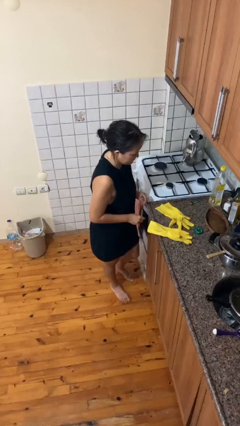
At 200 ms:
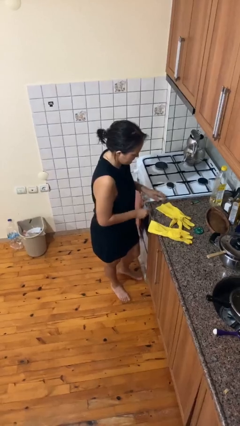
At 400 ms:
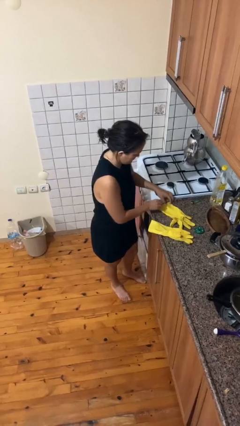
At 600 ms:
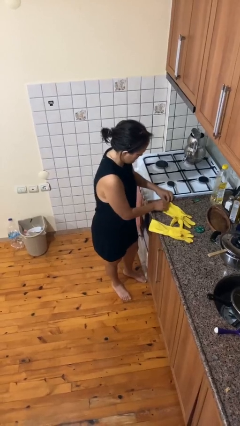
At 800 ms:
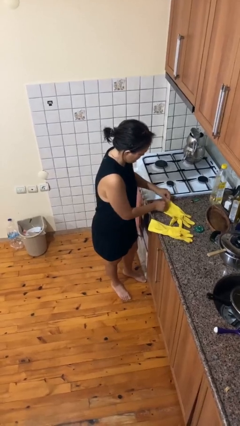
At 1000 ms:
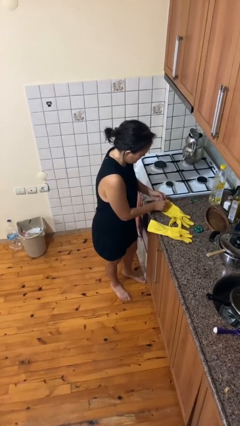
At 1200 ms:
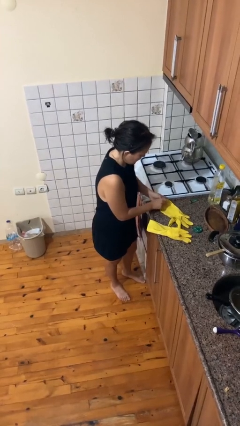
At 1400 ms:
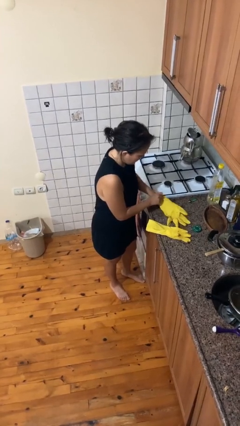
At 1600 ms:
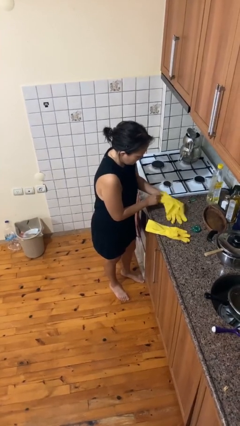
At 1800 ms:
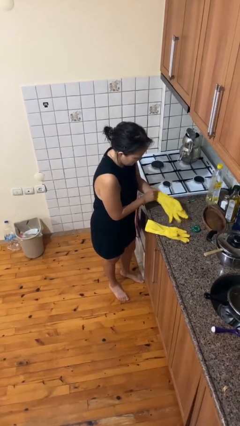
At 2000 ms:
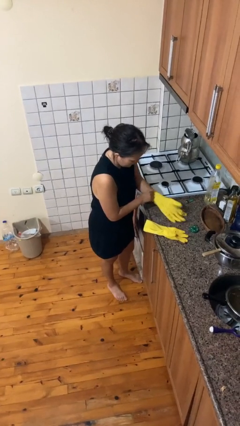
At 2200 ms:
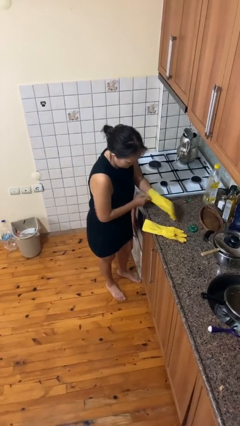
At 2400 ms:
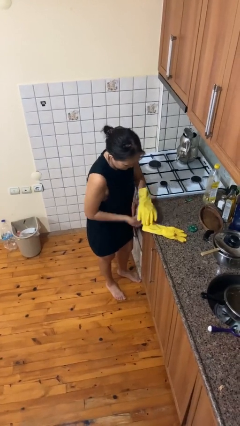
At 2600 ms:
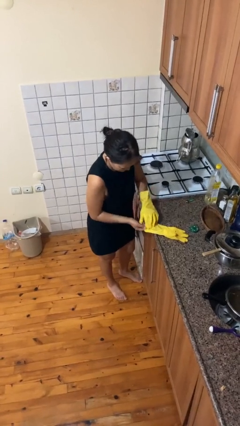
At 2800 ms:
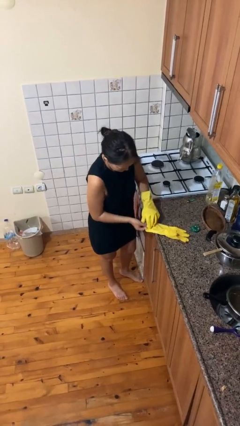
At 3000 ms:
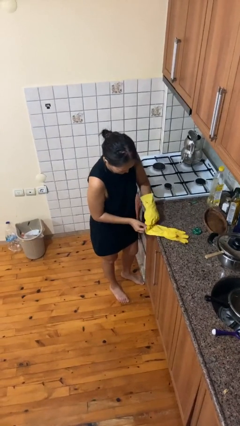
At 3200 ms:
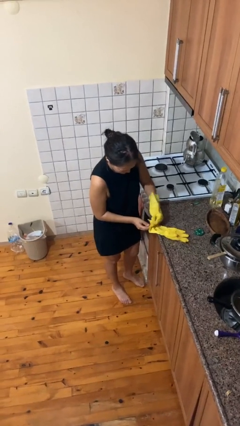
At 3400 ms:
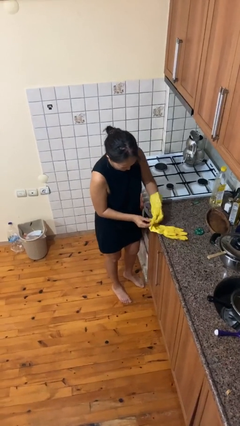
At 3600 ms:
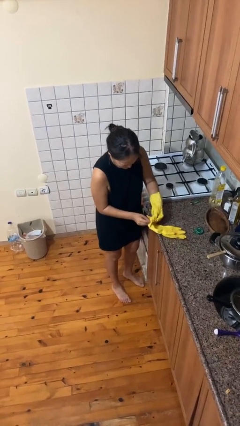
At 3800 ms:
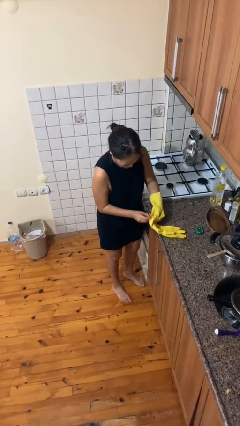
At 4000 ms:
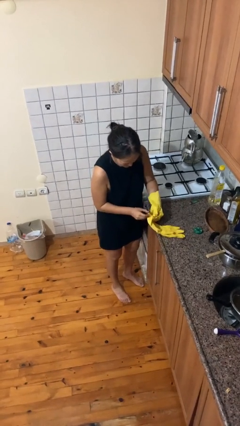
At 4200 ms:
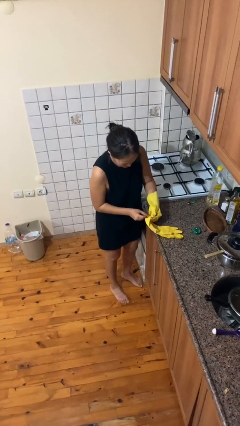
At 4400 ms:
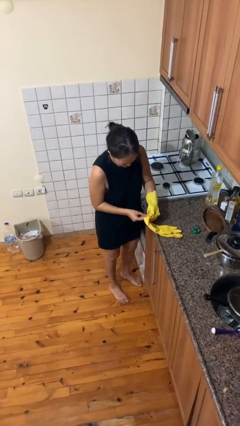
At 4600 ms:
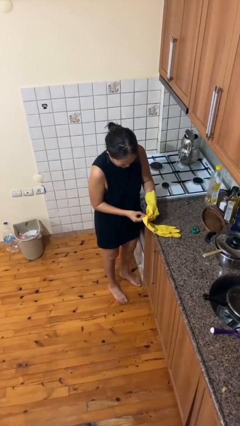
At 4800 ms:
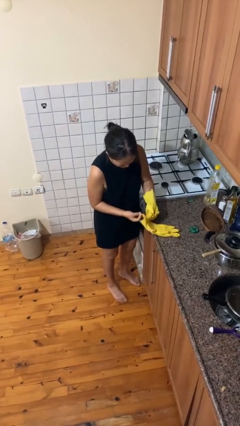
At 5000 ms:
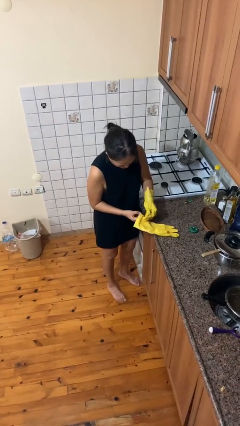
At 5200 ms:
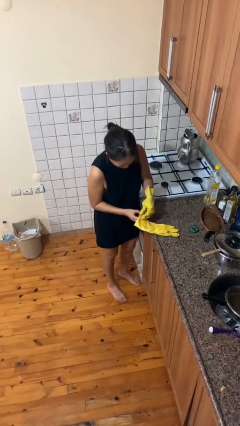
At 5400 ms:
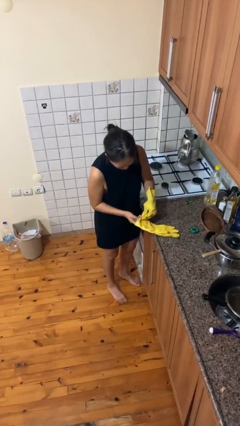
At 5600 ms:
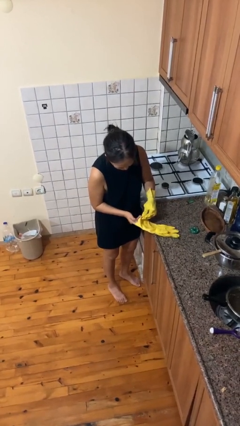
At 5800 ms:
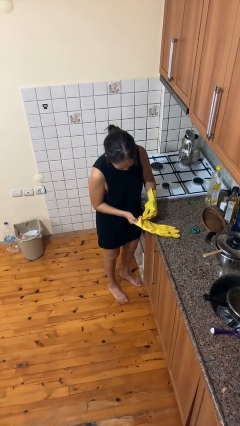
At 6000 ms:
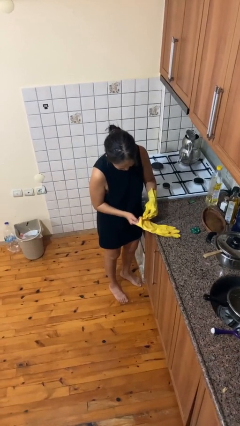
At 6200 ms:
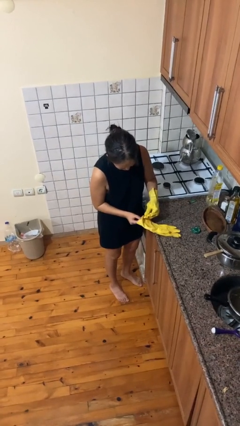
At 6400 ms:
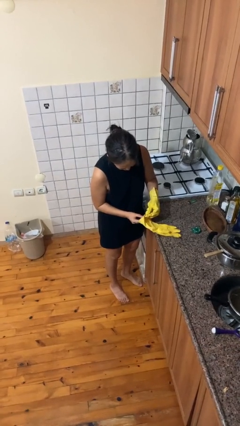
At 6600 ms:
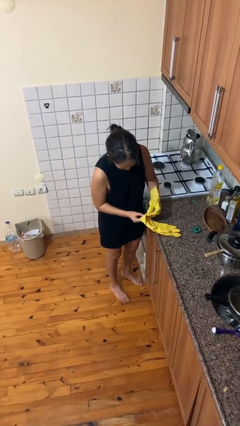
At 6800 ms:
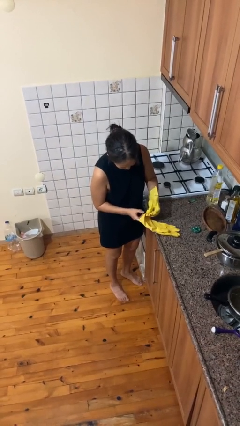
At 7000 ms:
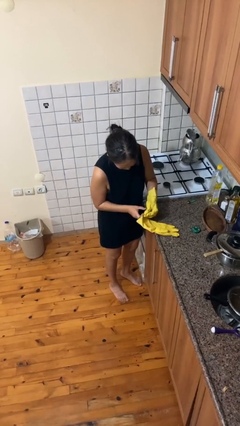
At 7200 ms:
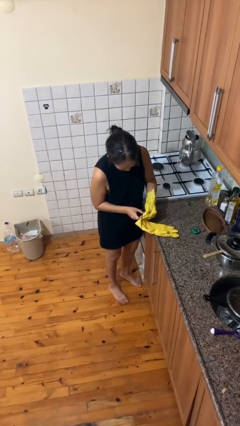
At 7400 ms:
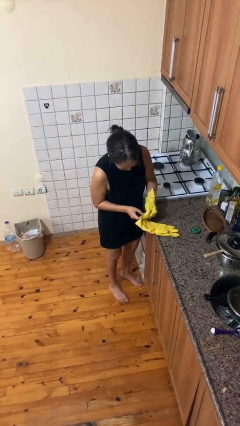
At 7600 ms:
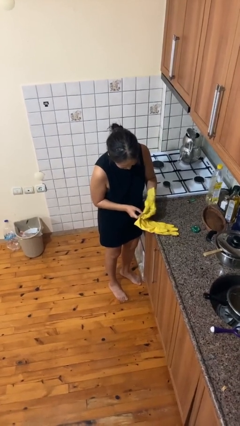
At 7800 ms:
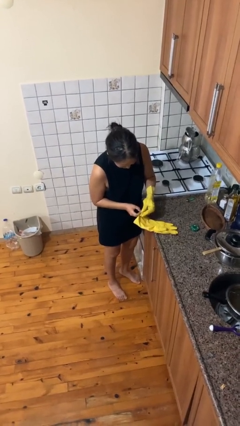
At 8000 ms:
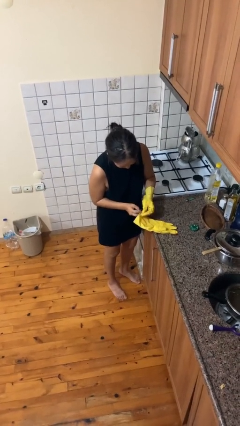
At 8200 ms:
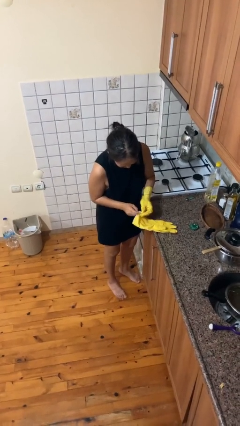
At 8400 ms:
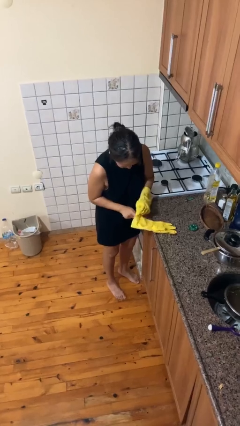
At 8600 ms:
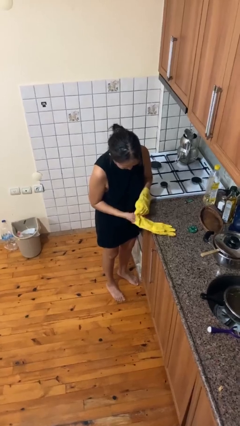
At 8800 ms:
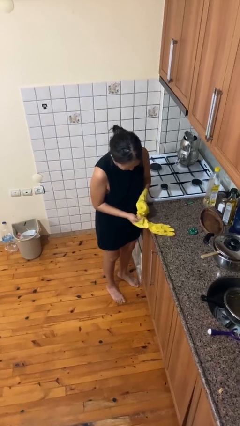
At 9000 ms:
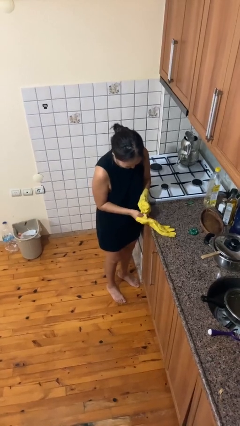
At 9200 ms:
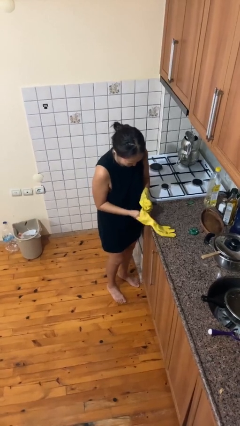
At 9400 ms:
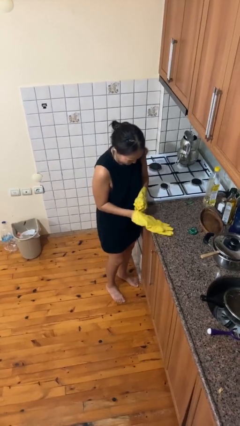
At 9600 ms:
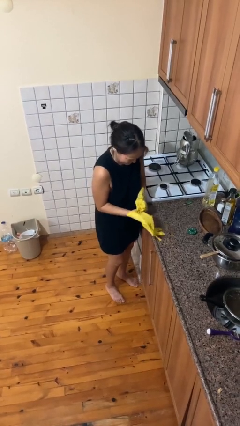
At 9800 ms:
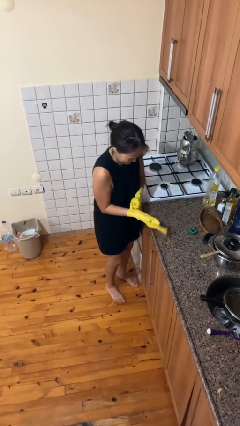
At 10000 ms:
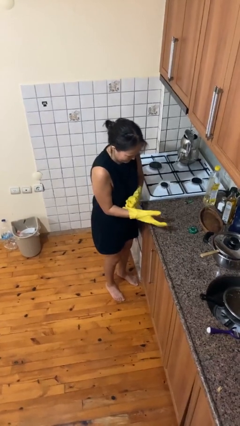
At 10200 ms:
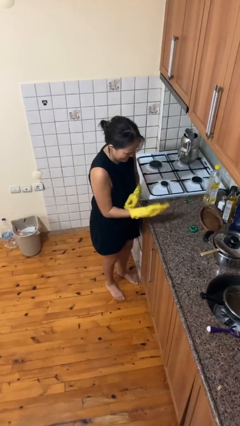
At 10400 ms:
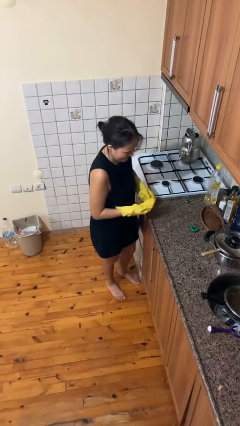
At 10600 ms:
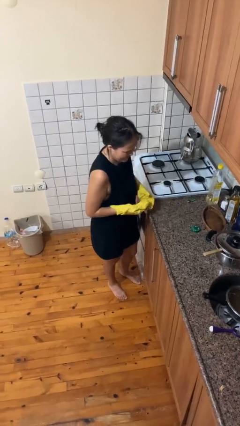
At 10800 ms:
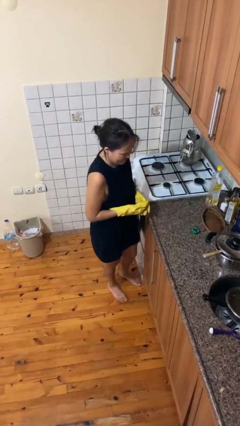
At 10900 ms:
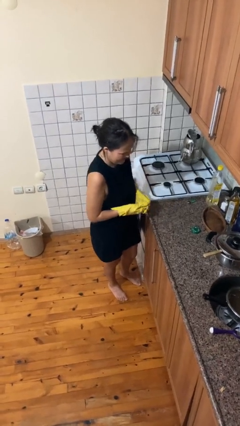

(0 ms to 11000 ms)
person puts on gloves

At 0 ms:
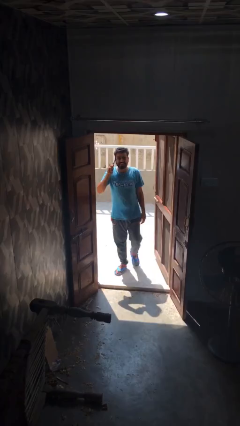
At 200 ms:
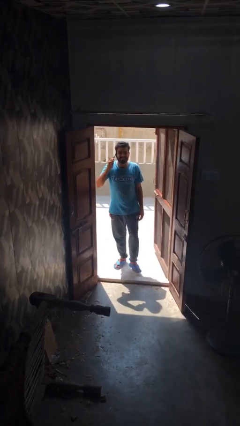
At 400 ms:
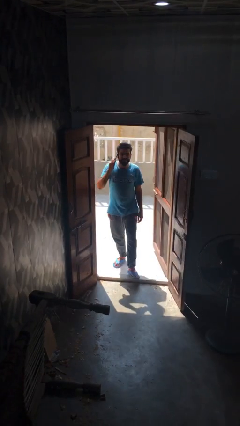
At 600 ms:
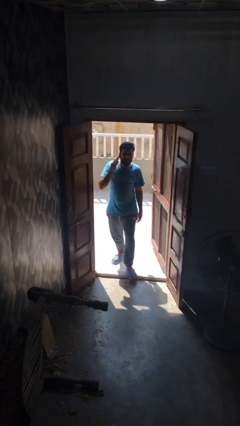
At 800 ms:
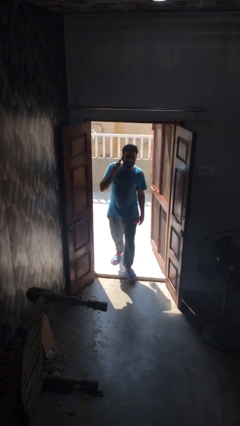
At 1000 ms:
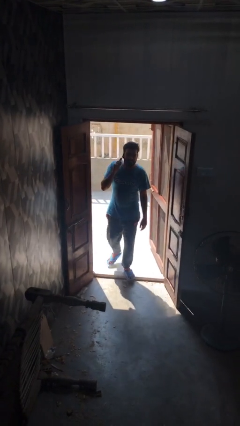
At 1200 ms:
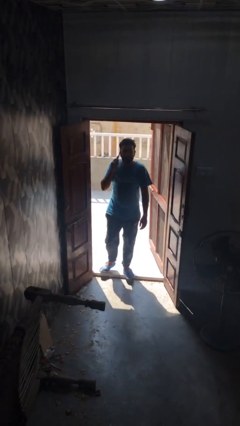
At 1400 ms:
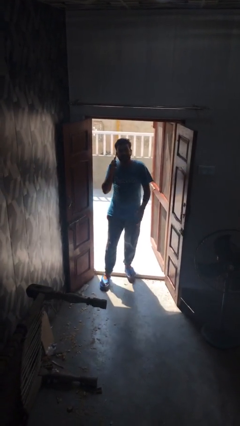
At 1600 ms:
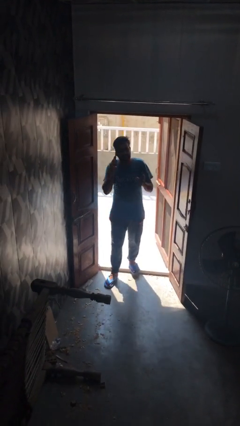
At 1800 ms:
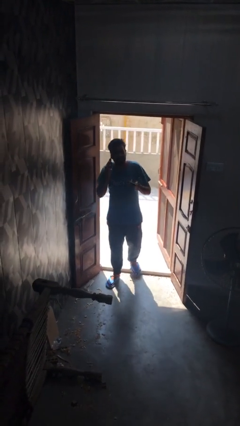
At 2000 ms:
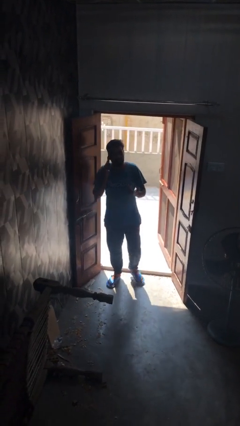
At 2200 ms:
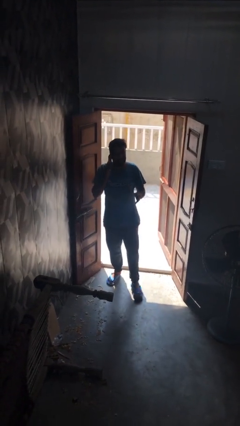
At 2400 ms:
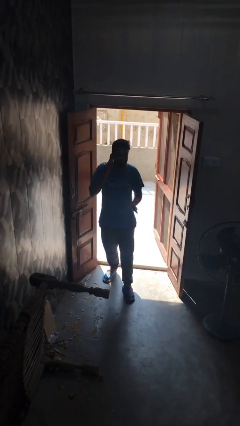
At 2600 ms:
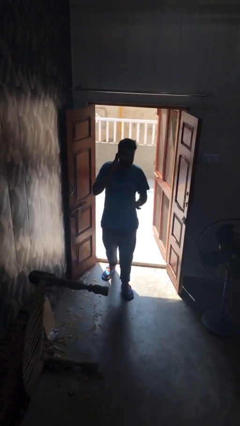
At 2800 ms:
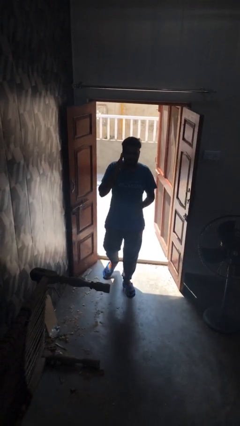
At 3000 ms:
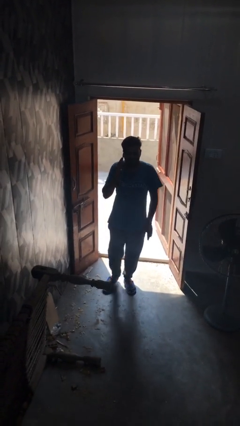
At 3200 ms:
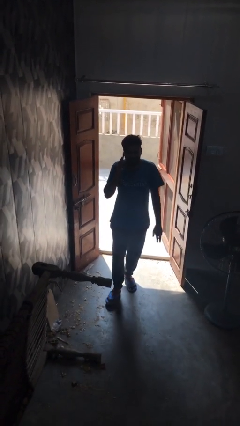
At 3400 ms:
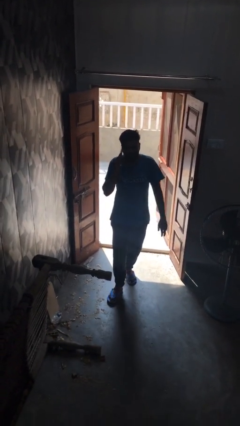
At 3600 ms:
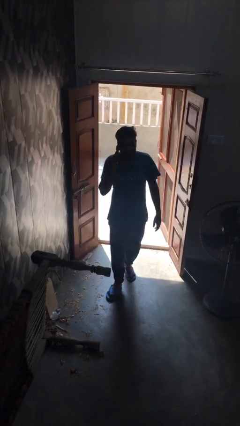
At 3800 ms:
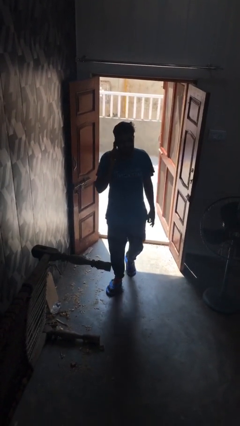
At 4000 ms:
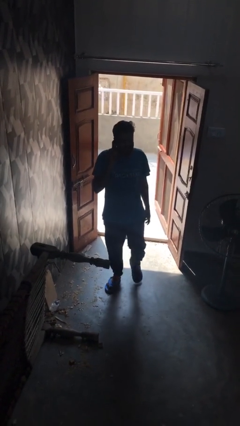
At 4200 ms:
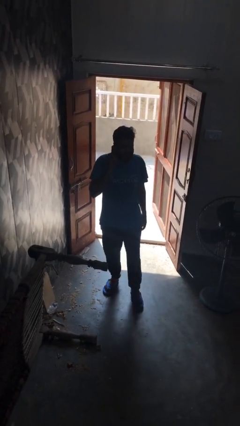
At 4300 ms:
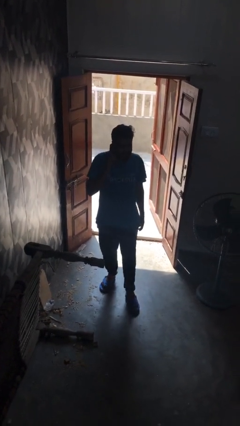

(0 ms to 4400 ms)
person enters scene through structure

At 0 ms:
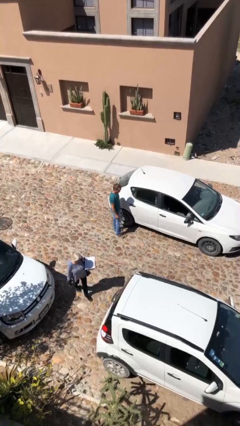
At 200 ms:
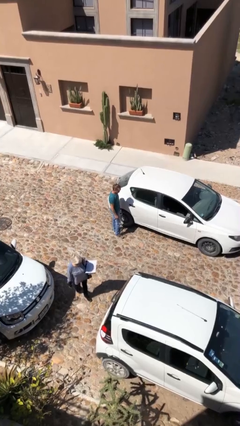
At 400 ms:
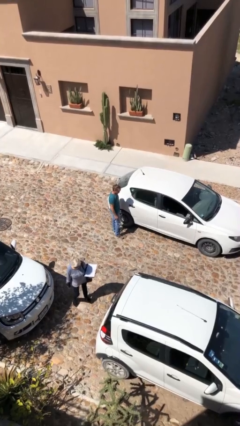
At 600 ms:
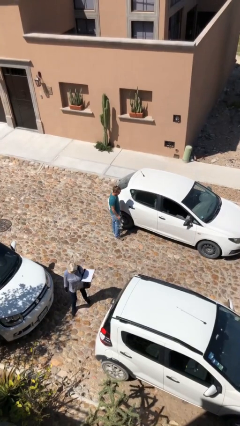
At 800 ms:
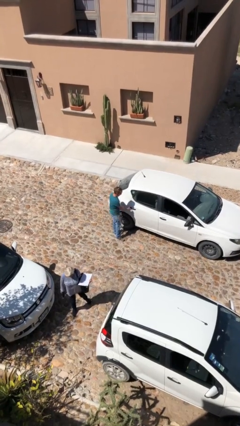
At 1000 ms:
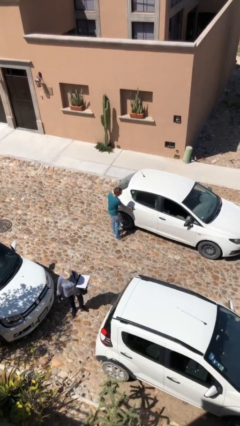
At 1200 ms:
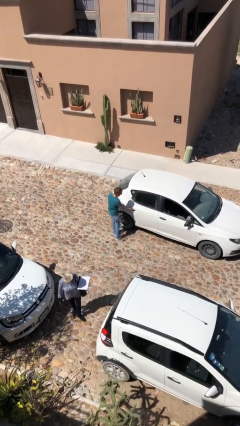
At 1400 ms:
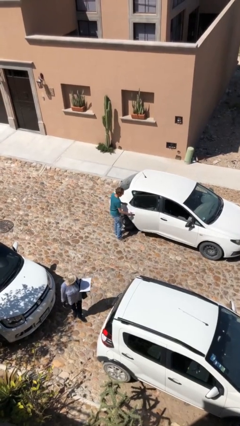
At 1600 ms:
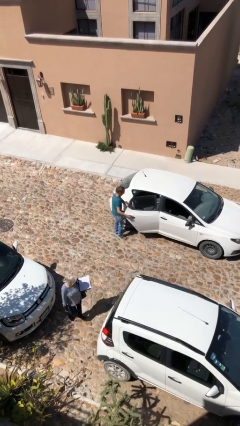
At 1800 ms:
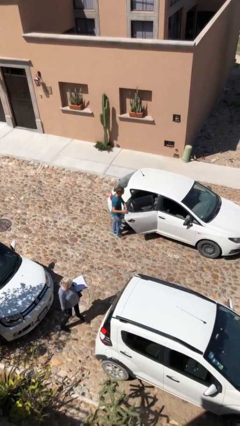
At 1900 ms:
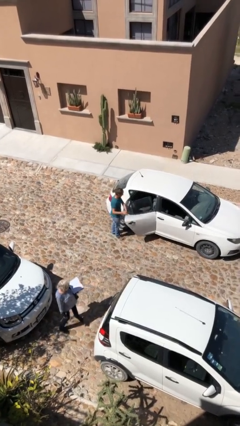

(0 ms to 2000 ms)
person opens car door

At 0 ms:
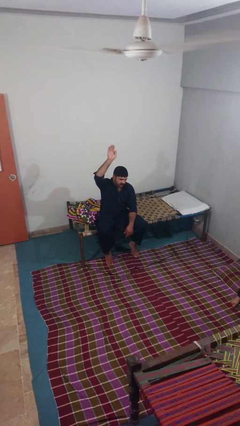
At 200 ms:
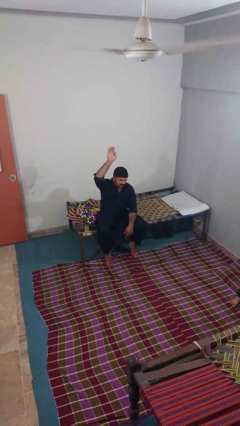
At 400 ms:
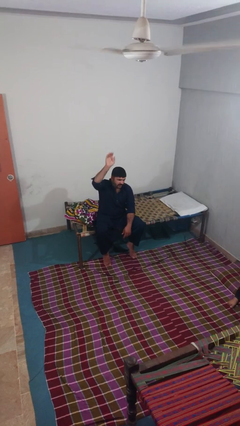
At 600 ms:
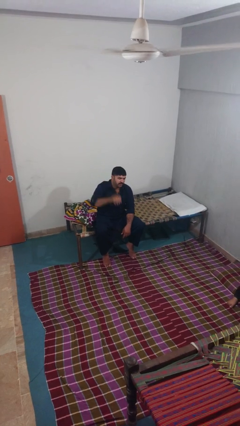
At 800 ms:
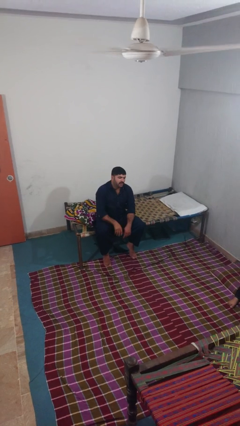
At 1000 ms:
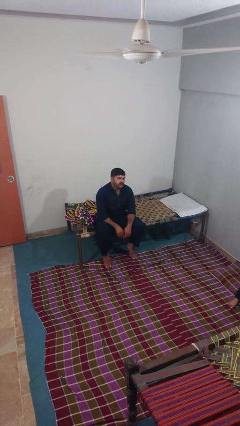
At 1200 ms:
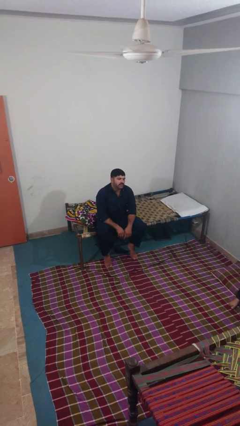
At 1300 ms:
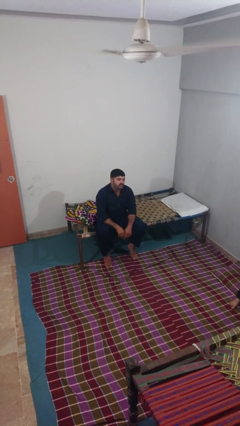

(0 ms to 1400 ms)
person gestures lower hand
